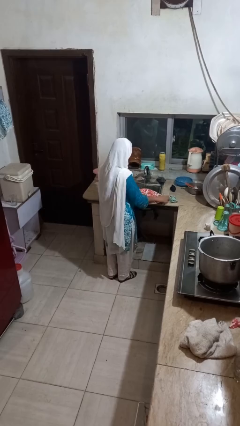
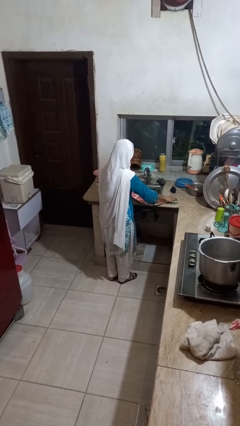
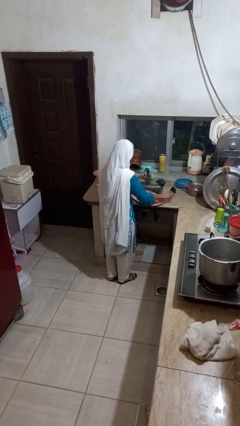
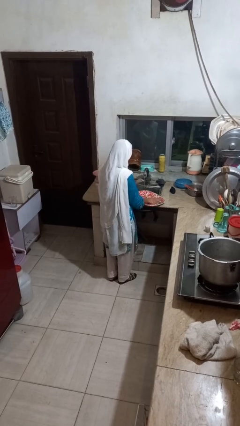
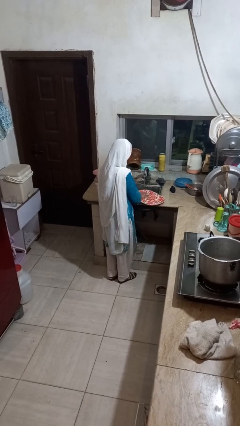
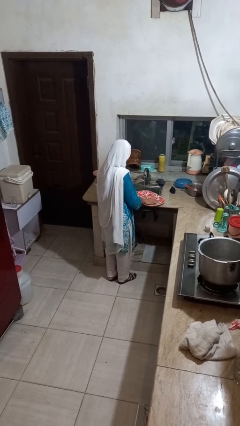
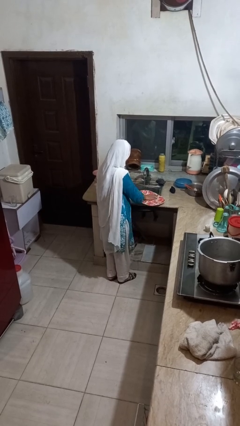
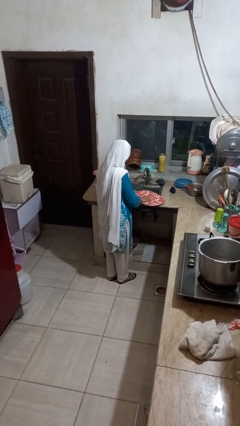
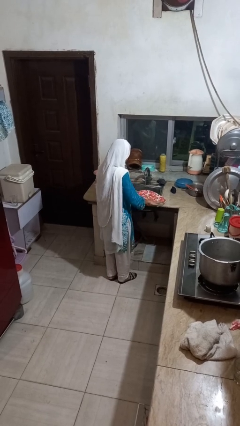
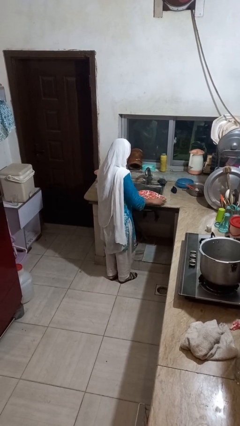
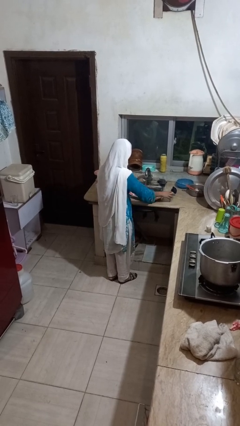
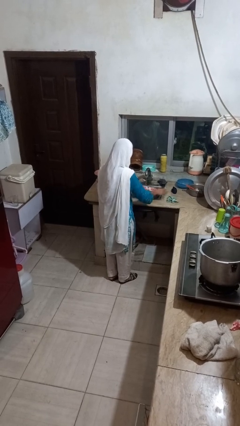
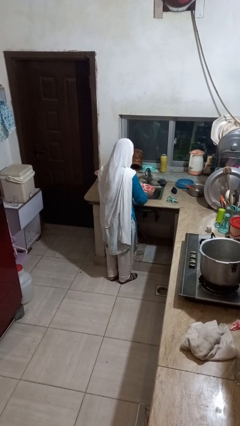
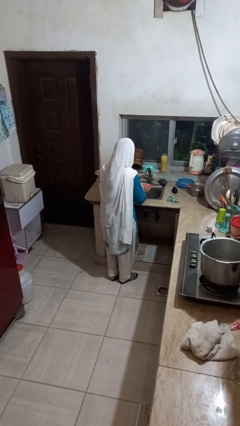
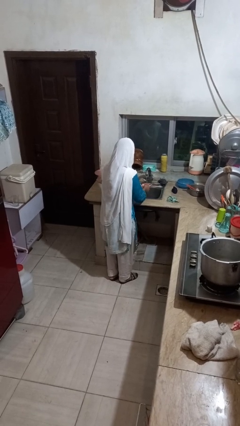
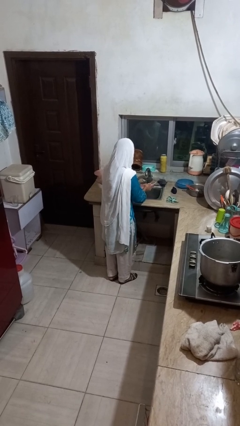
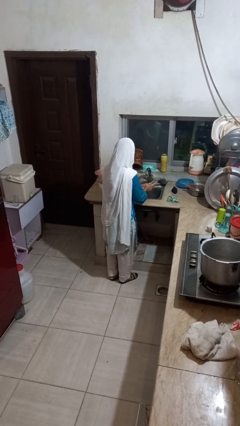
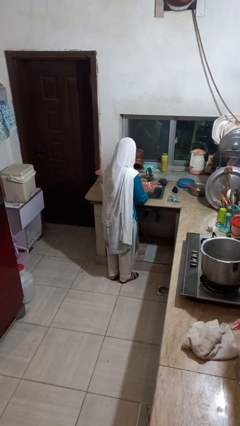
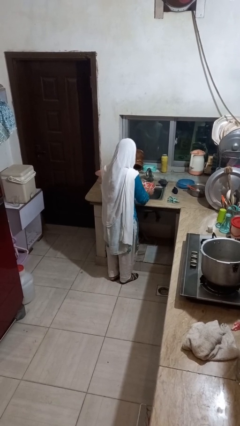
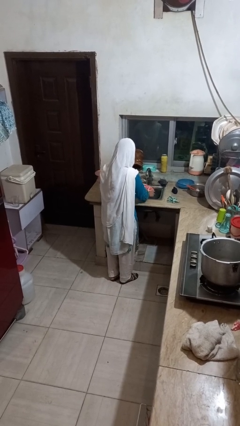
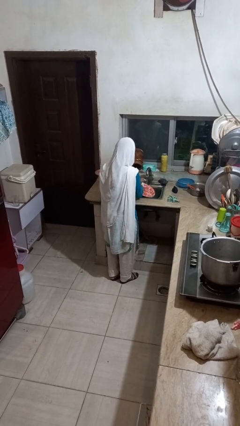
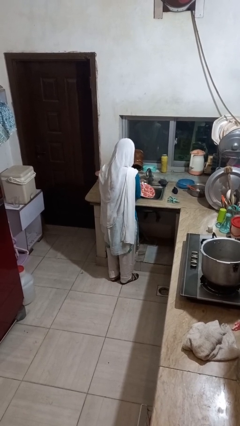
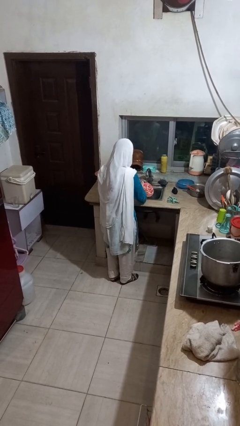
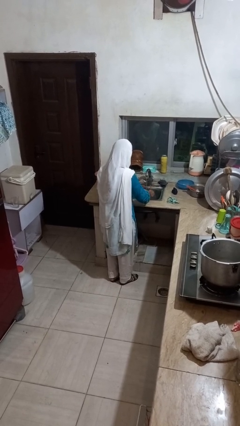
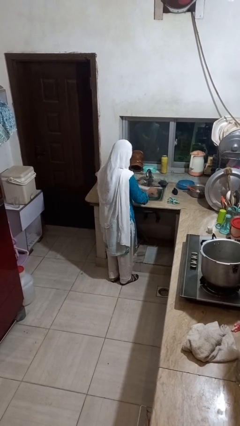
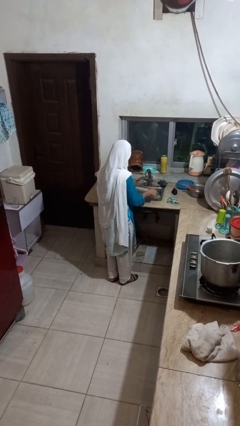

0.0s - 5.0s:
person washes dish

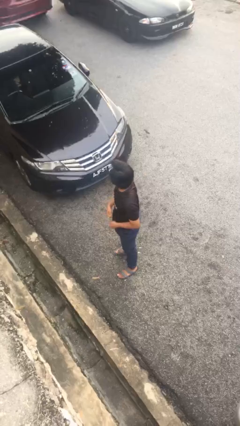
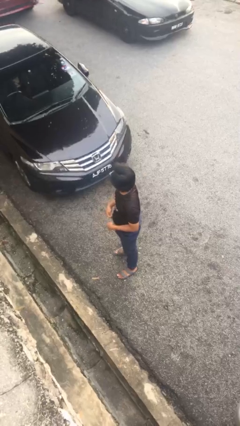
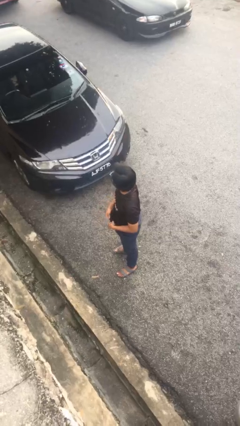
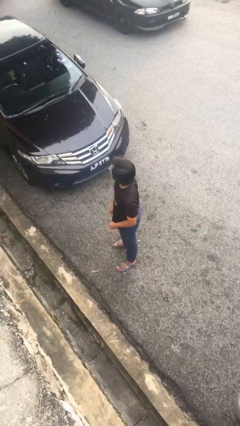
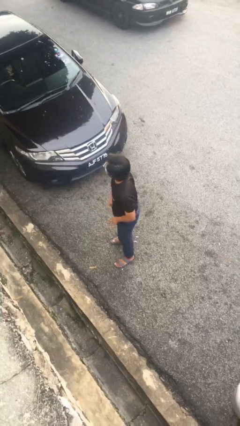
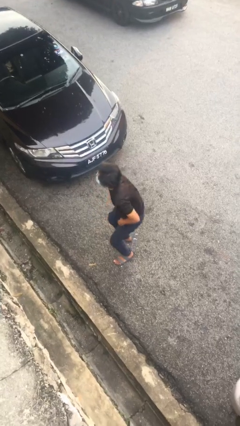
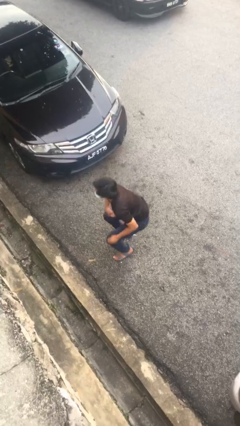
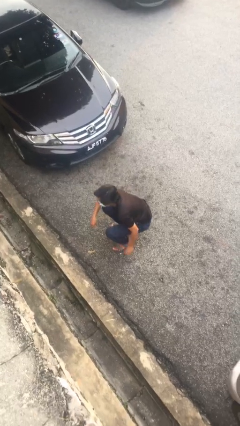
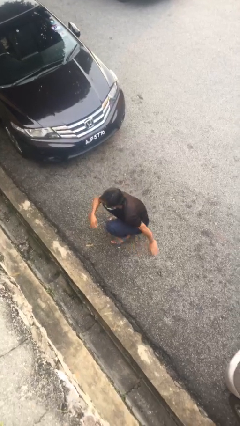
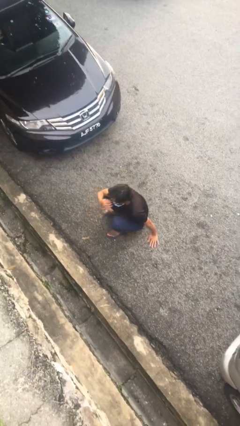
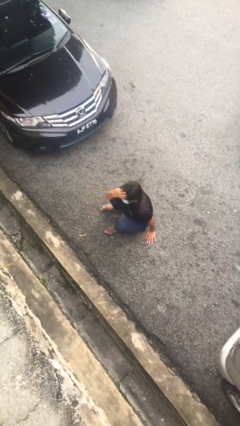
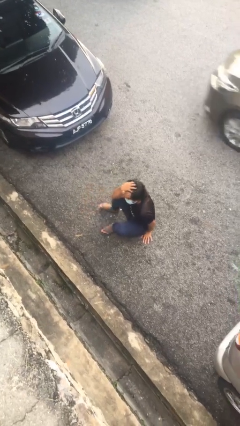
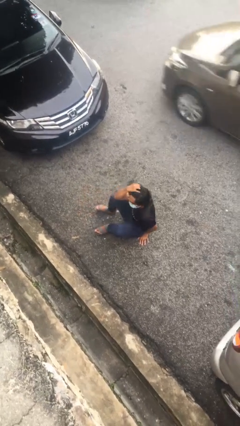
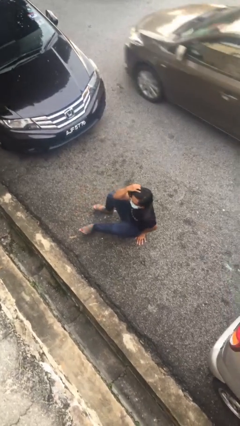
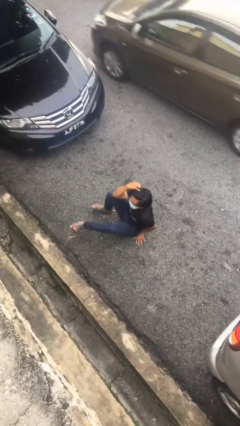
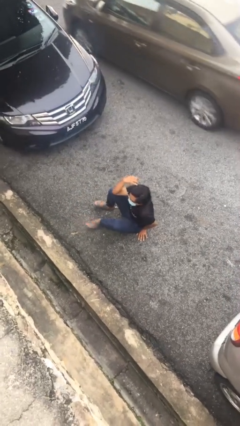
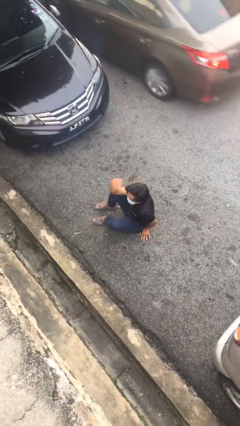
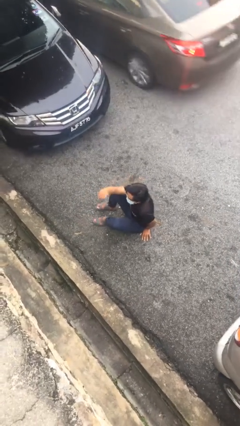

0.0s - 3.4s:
person sits down

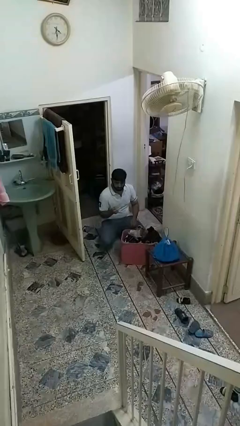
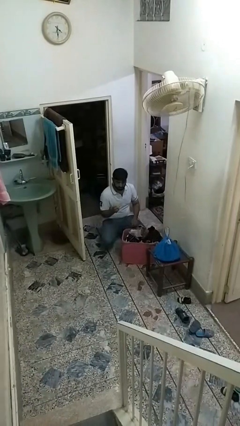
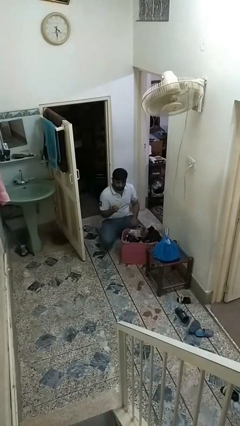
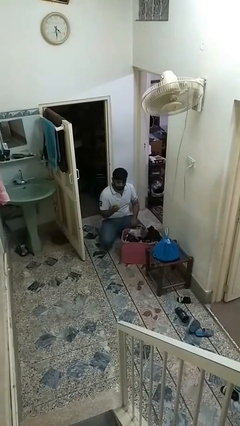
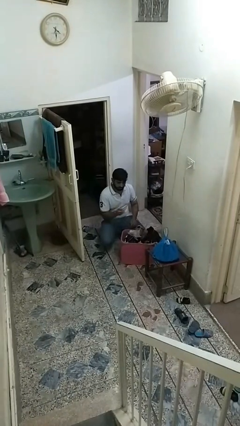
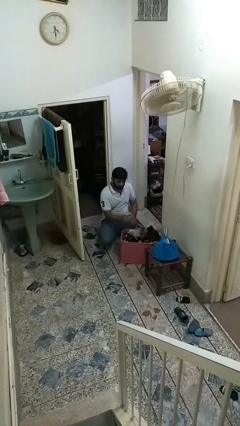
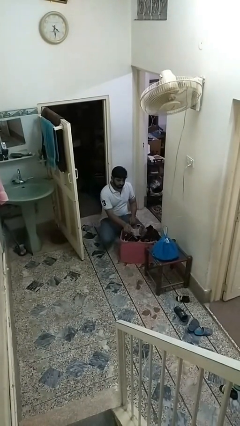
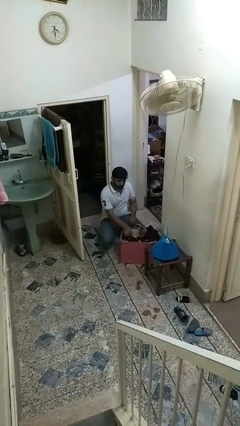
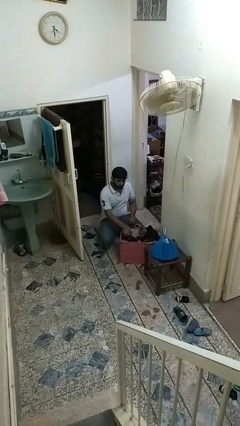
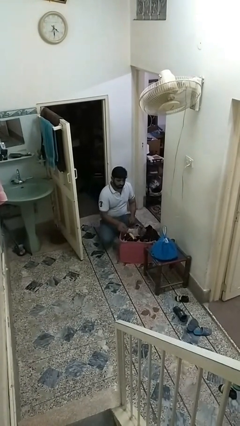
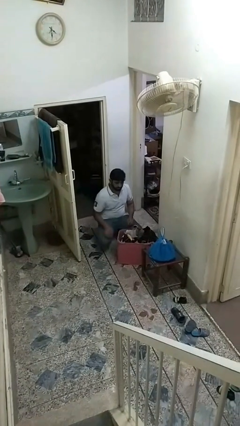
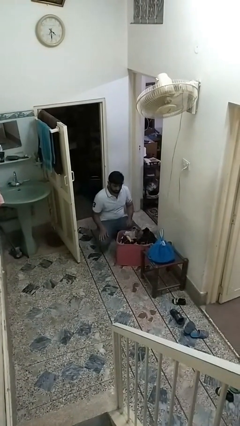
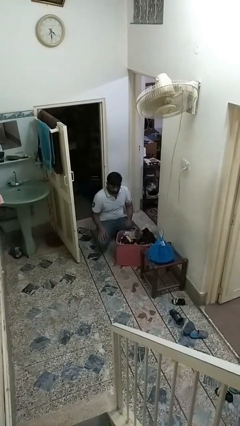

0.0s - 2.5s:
person puts object into basket

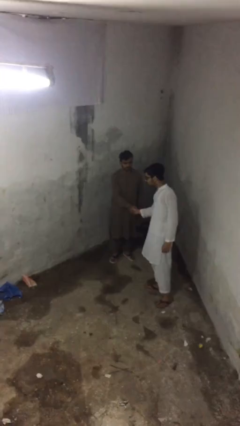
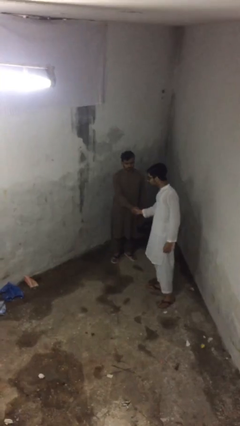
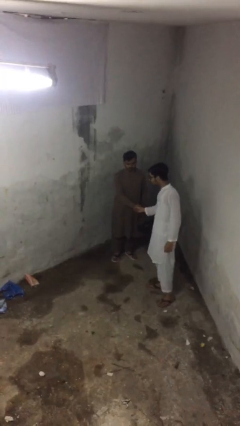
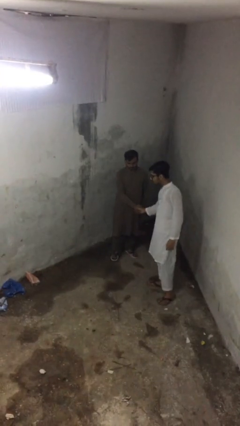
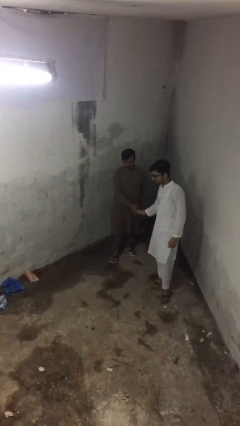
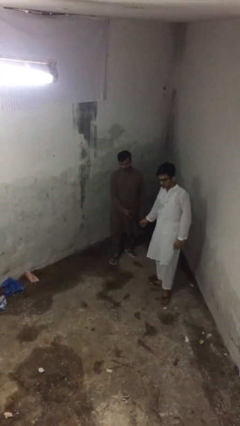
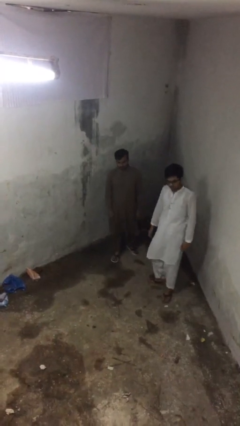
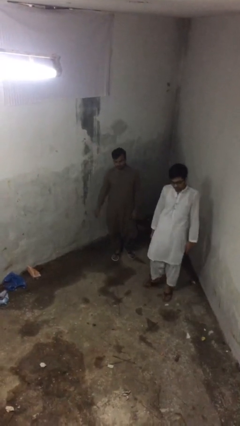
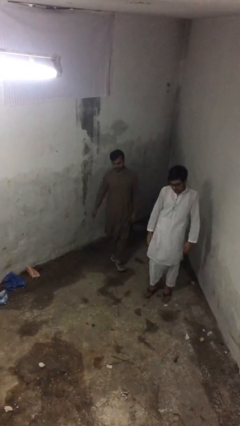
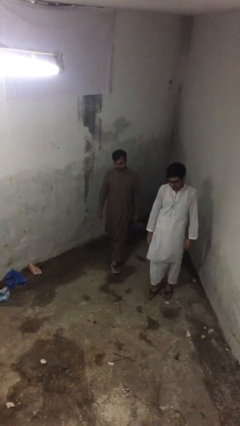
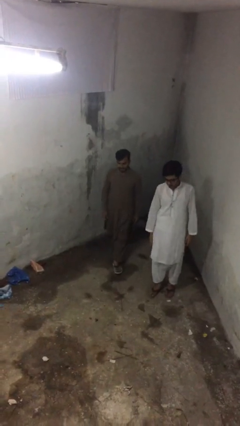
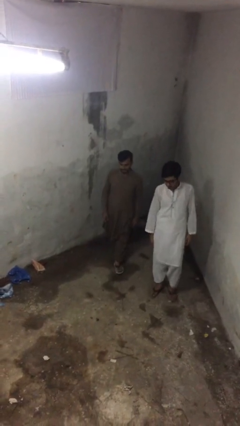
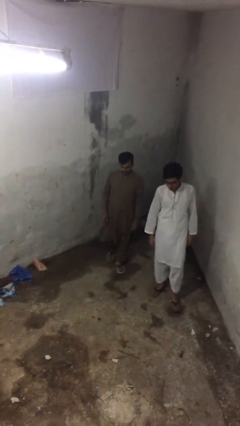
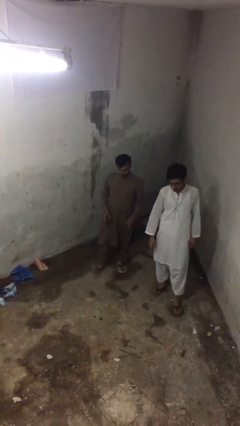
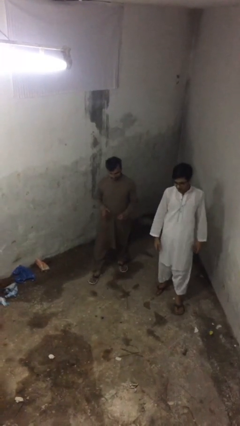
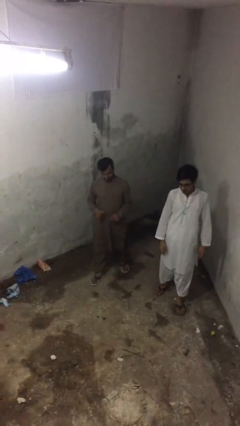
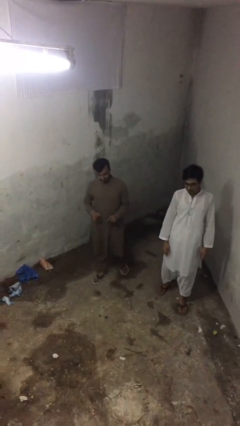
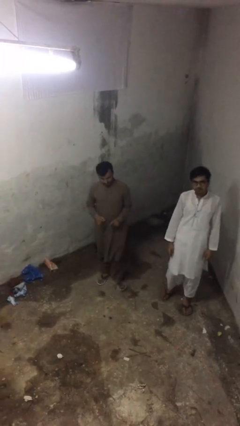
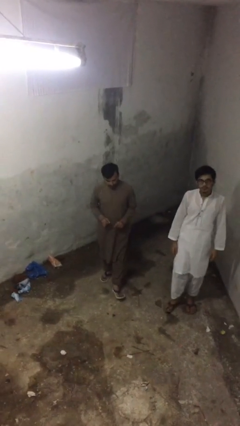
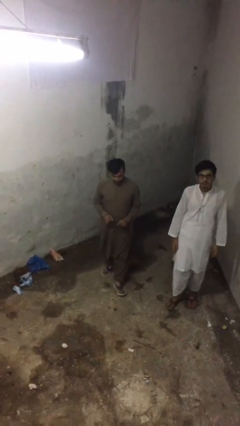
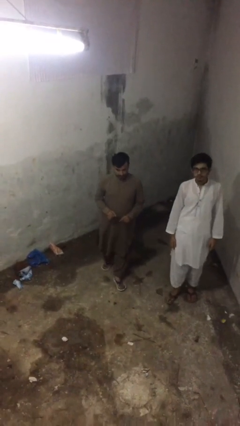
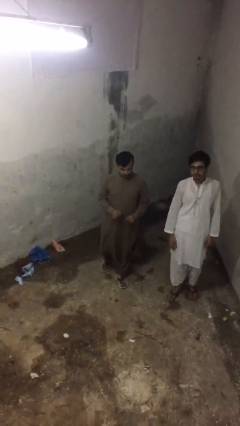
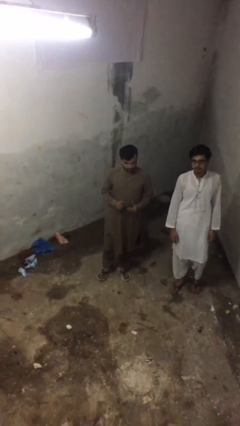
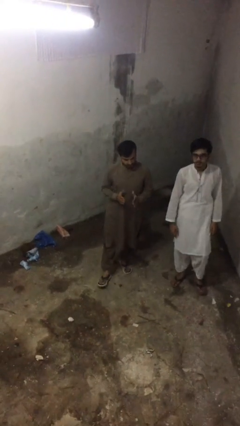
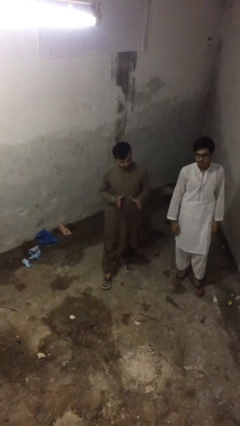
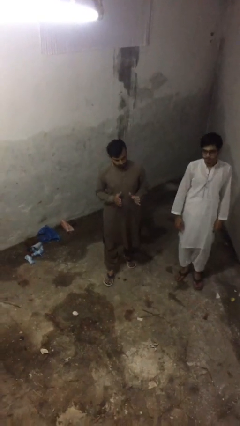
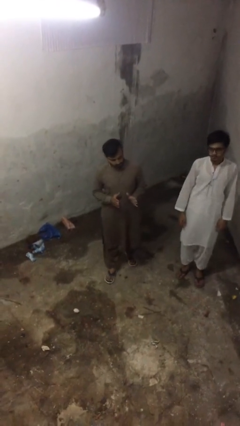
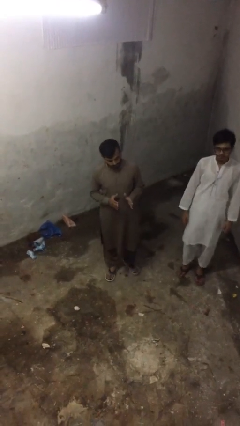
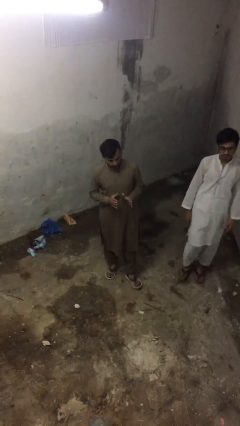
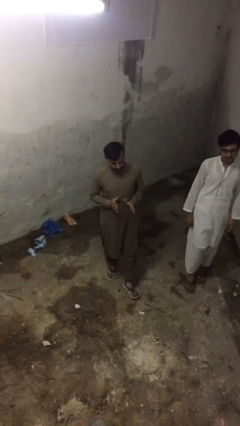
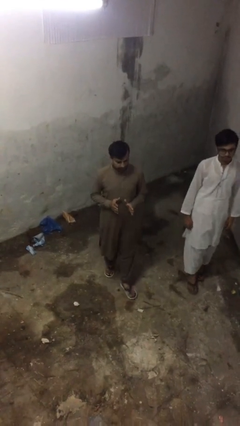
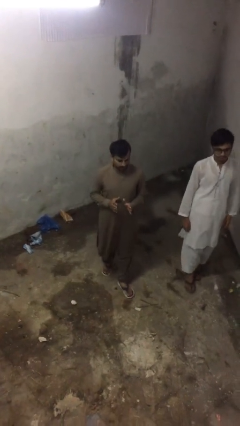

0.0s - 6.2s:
person talks to person

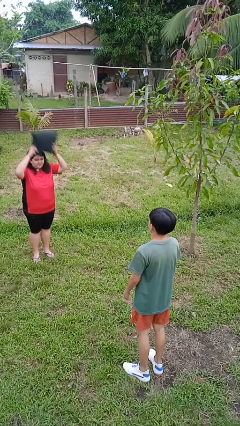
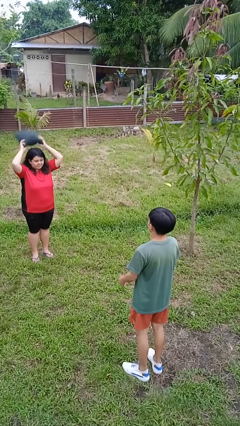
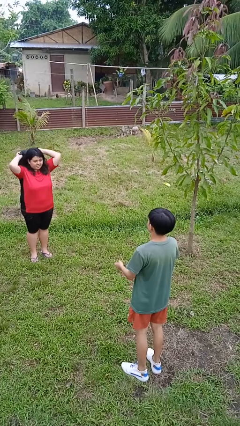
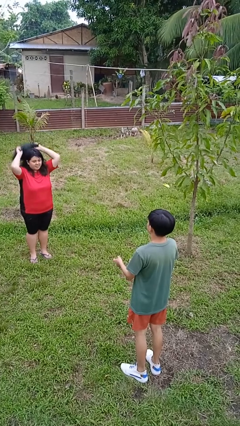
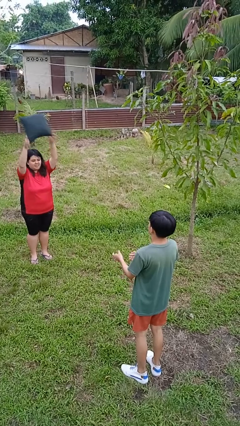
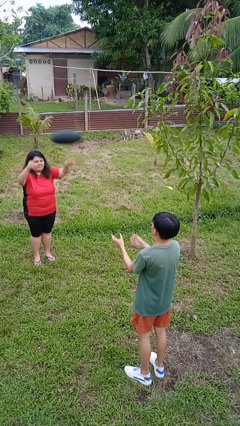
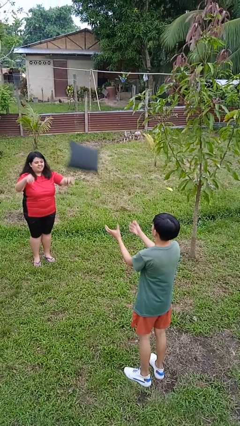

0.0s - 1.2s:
person throws object to person
